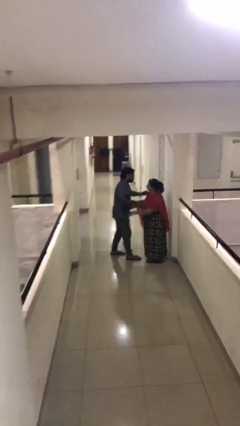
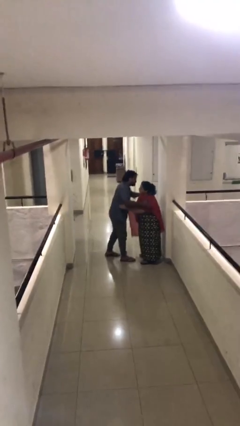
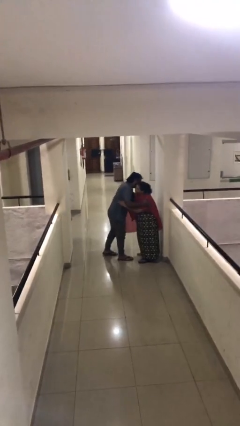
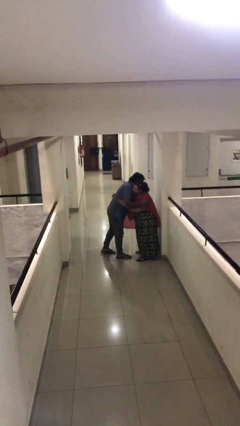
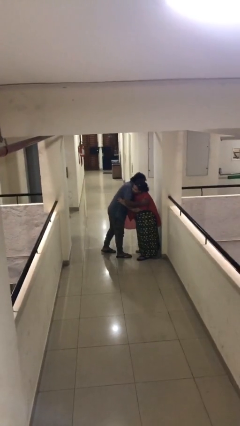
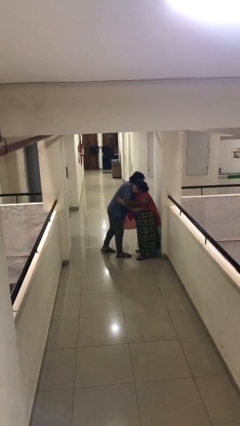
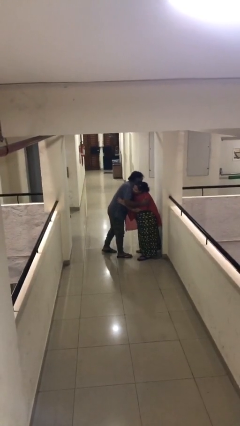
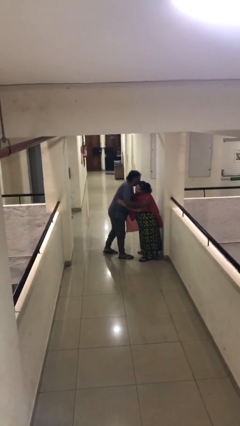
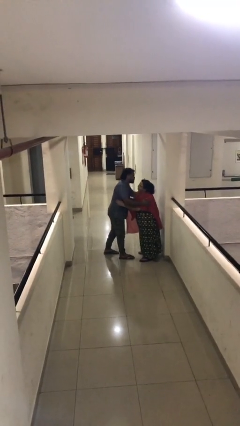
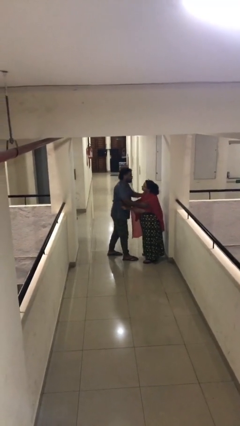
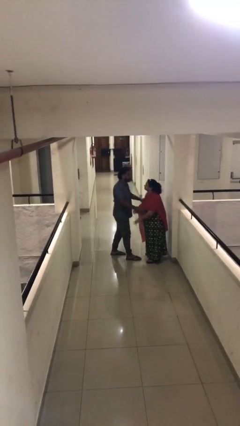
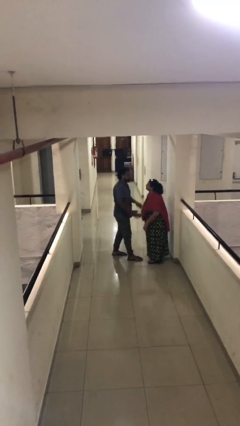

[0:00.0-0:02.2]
person embraces person

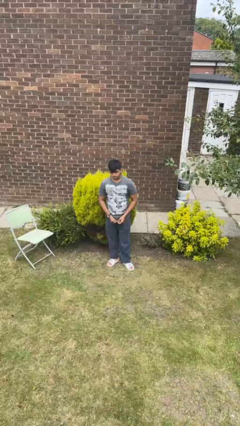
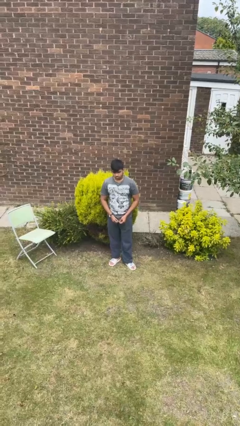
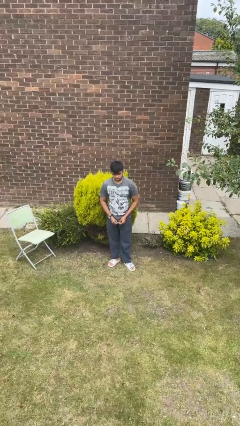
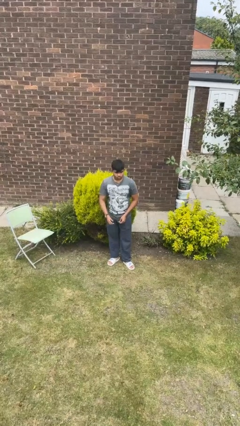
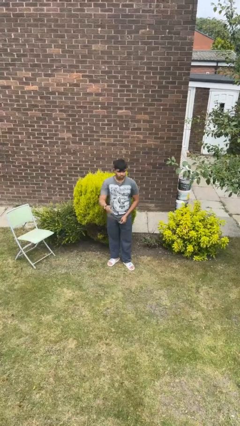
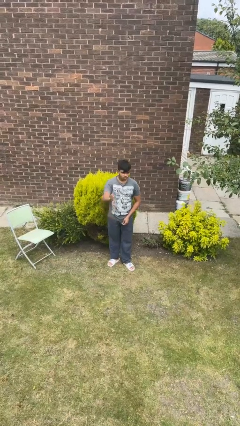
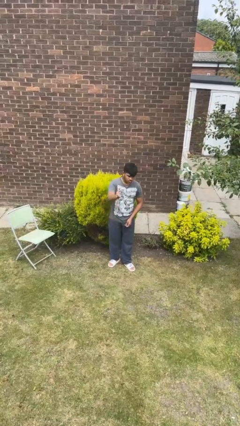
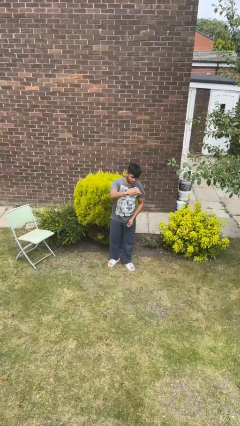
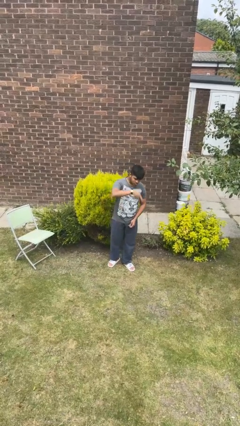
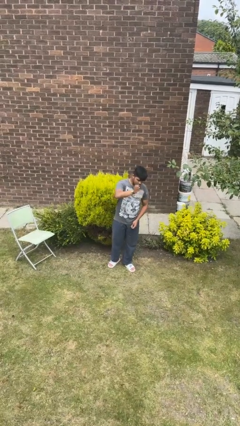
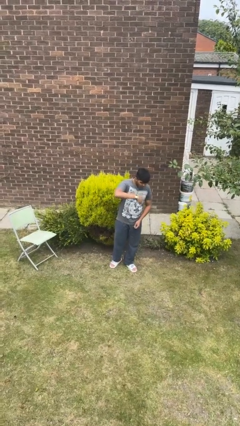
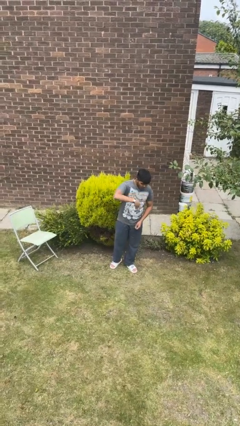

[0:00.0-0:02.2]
person gestures come here

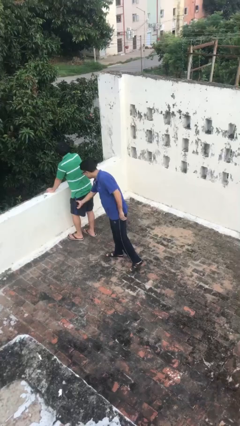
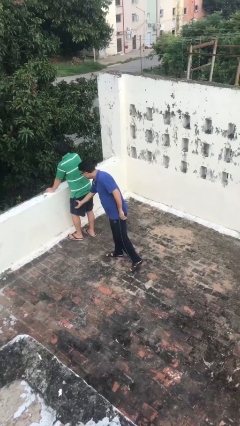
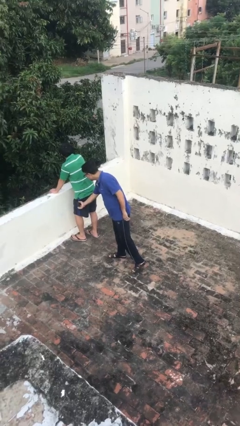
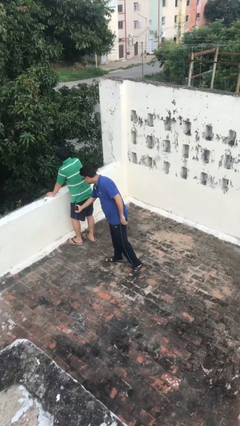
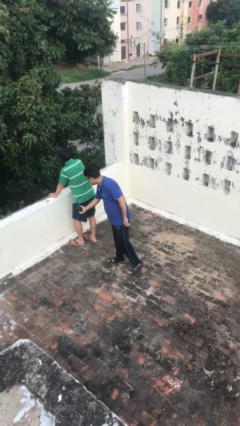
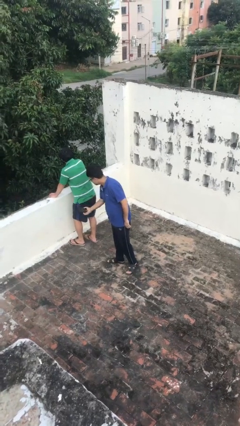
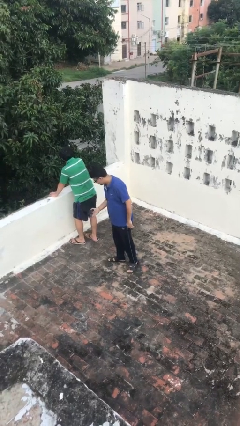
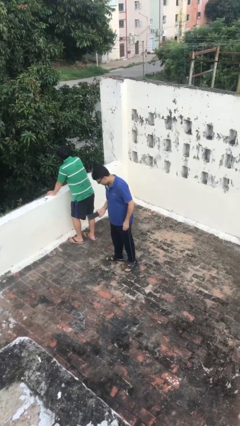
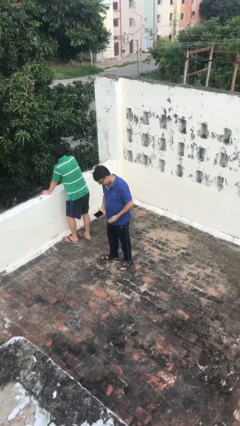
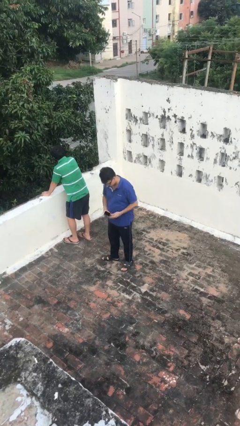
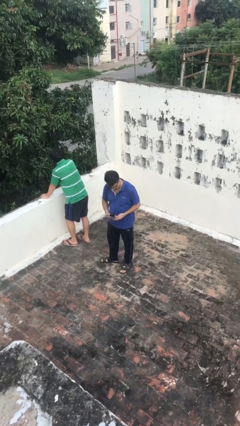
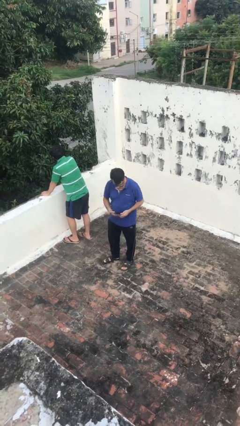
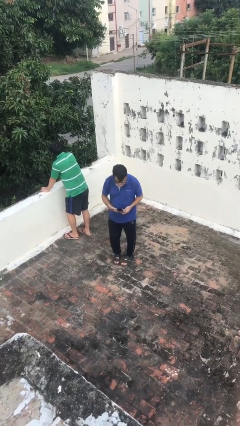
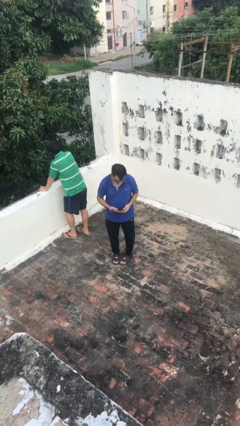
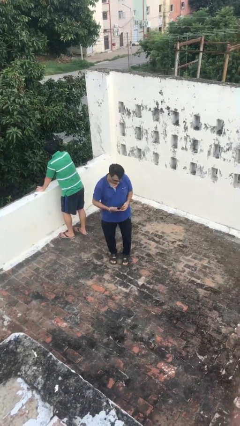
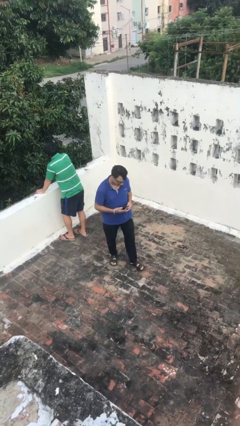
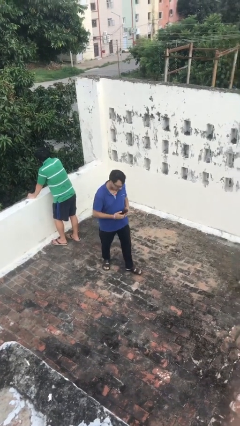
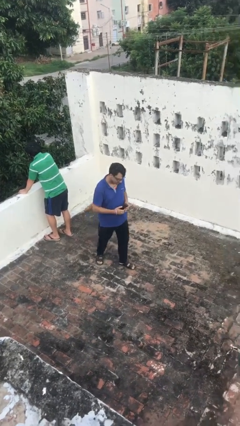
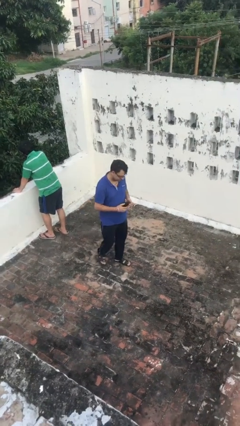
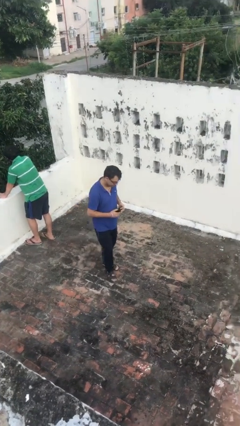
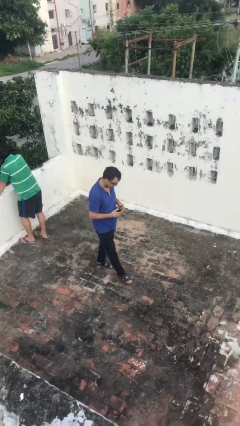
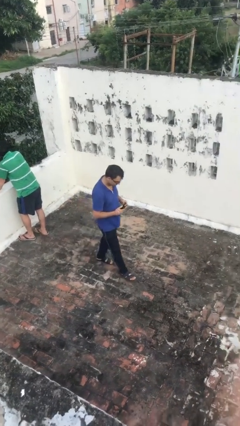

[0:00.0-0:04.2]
person steals object from person

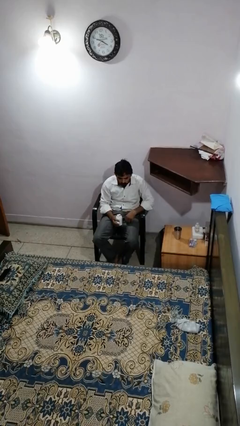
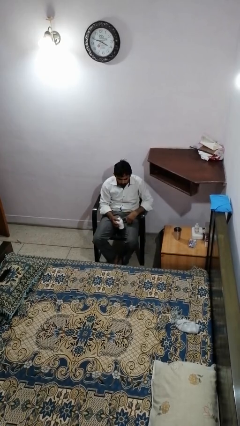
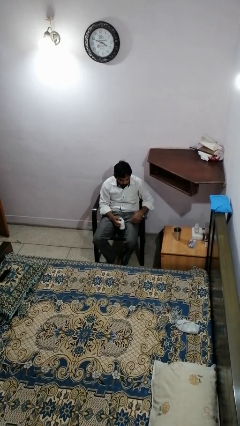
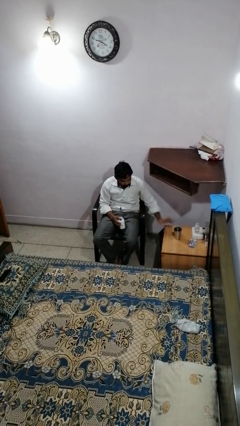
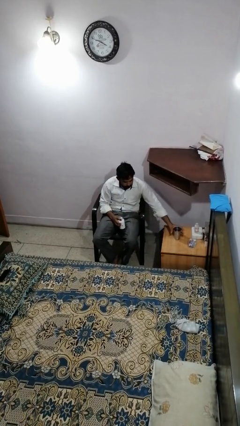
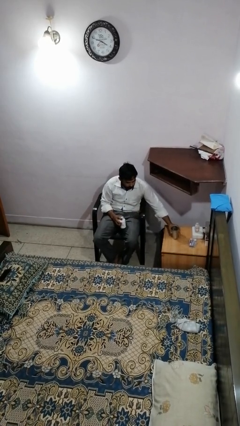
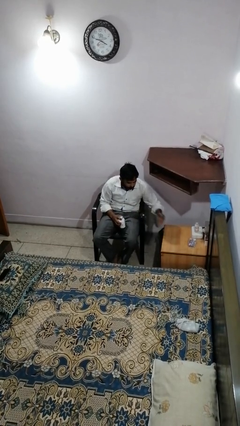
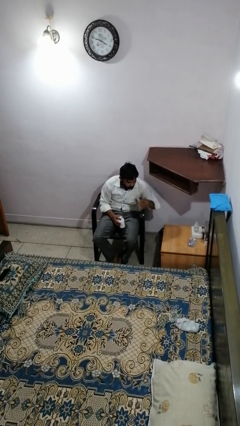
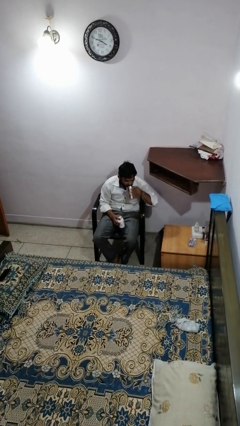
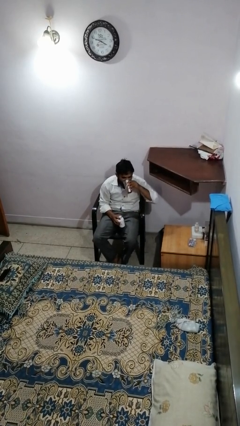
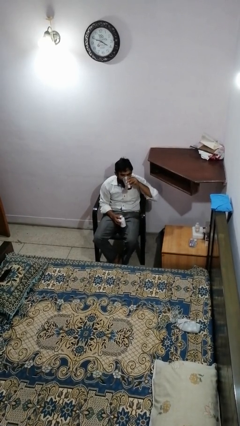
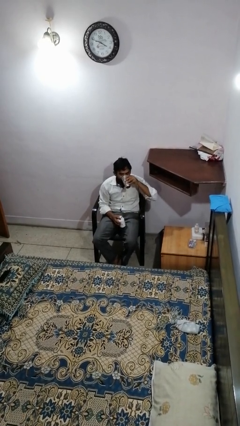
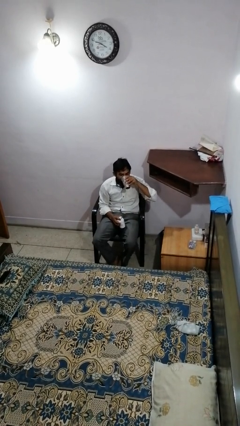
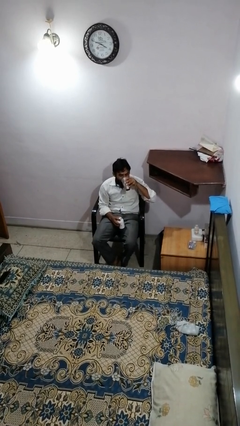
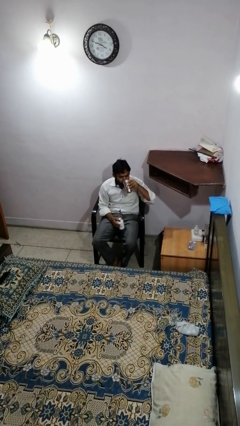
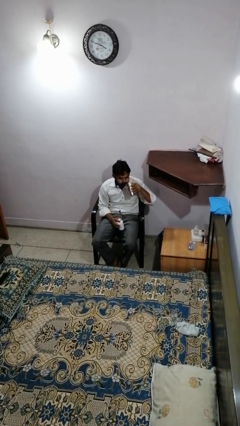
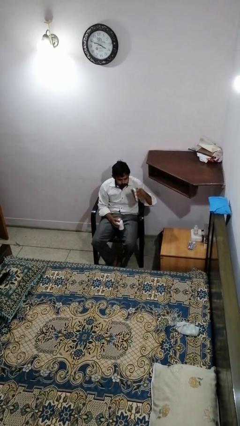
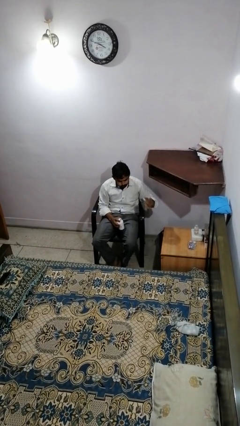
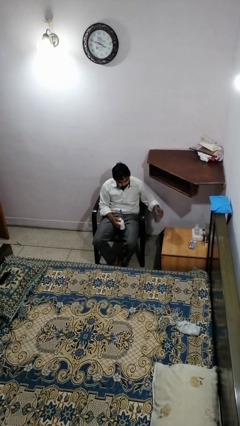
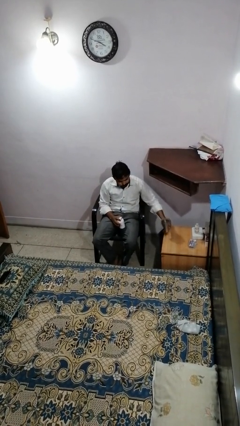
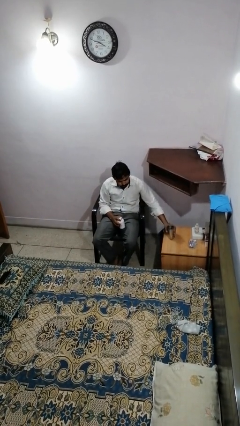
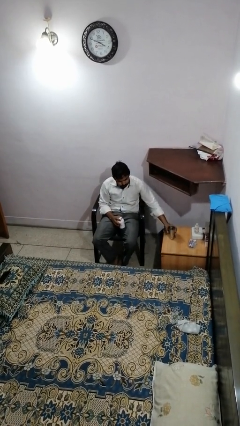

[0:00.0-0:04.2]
person drinks from cup

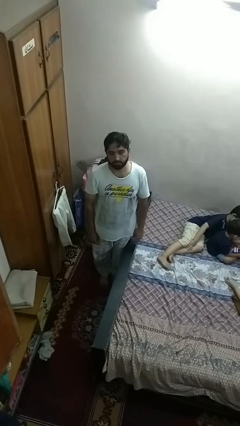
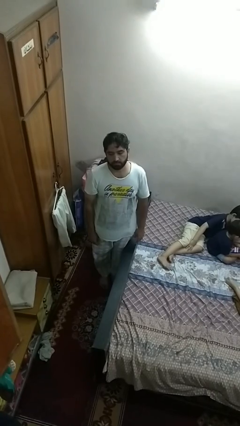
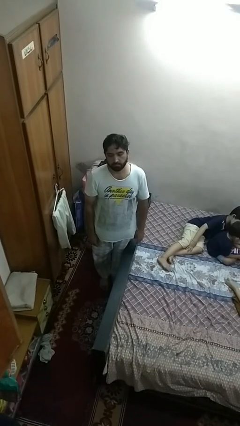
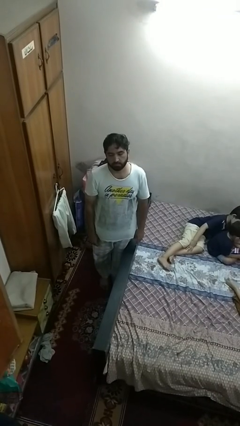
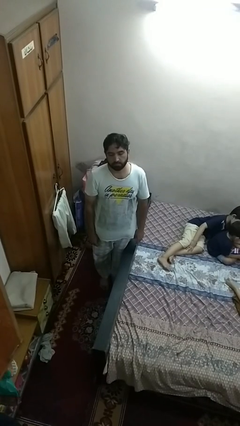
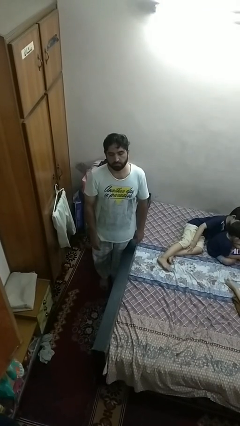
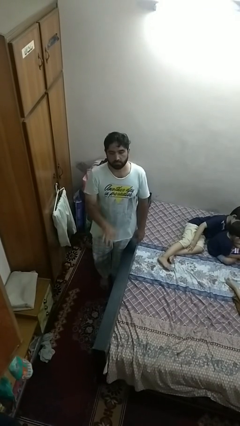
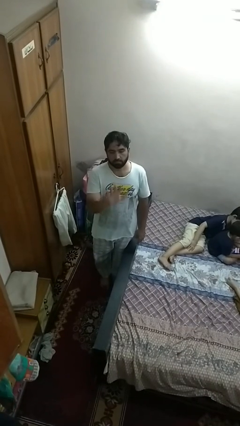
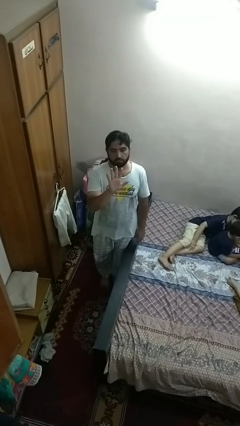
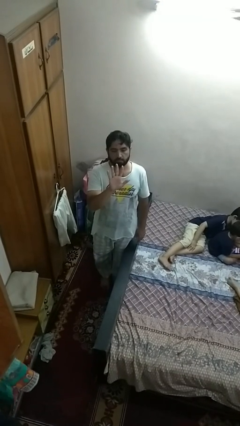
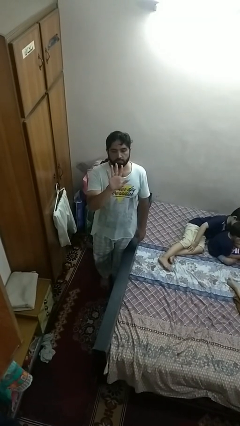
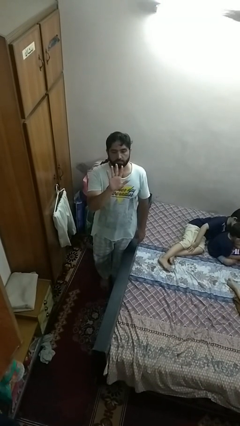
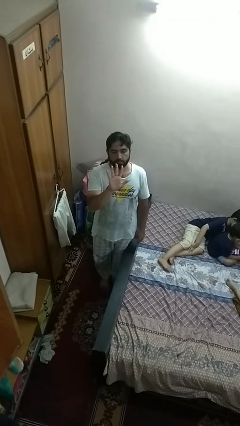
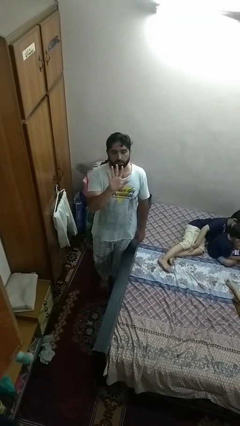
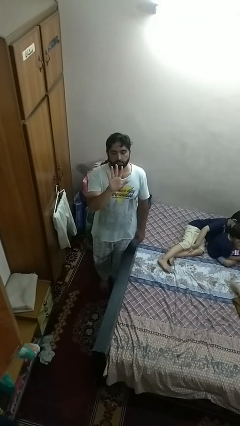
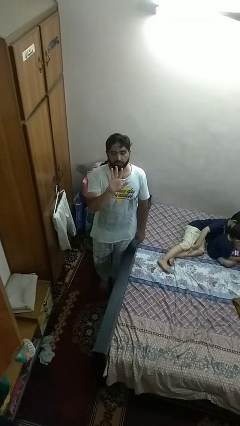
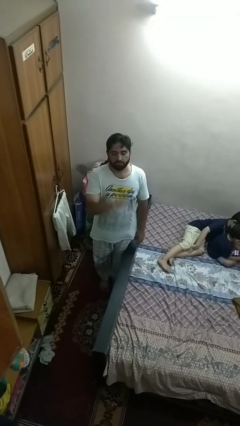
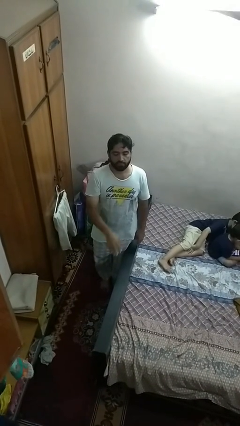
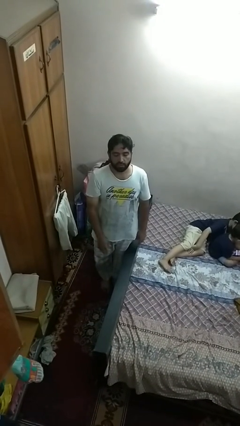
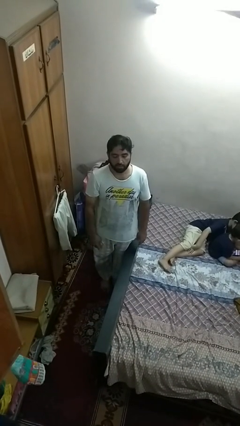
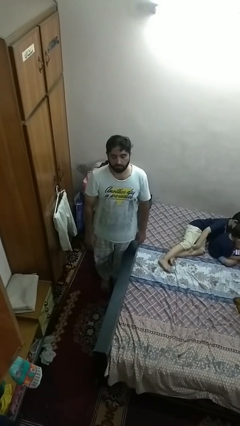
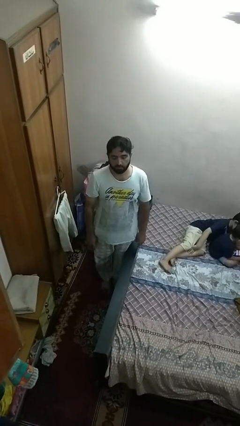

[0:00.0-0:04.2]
person gestures number five

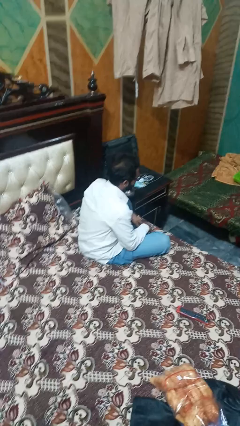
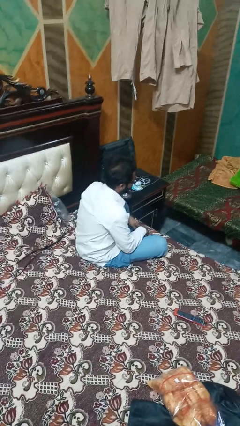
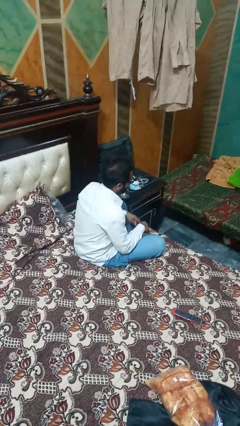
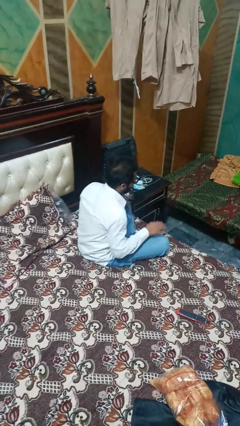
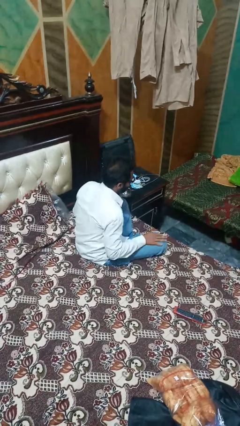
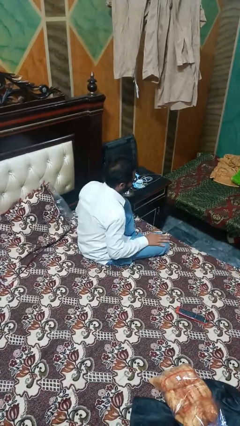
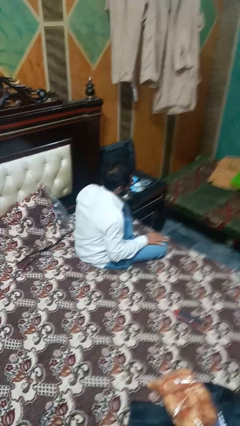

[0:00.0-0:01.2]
person slaps hands on thighs
